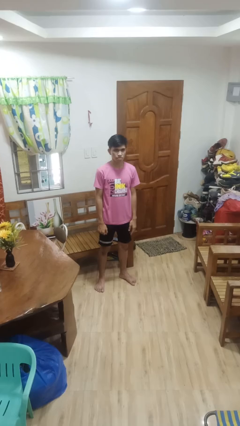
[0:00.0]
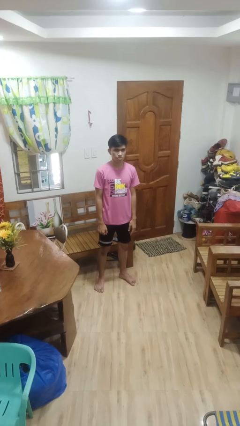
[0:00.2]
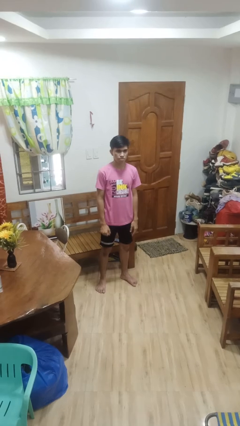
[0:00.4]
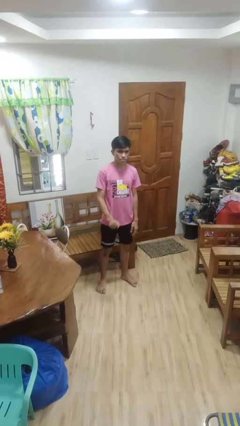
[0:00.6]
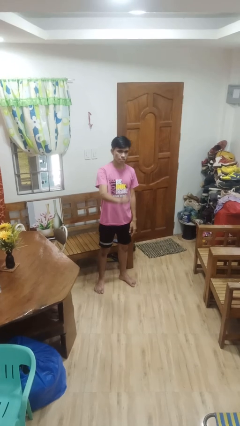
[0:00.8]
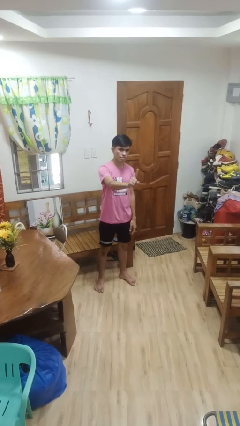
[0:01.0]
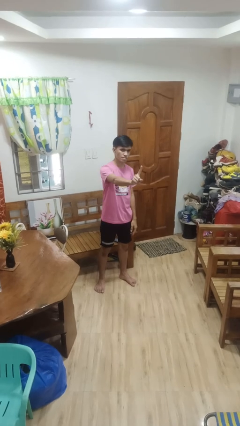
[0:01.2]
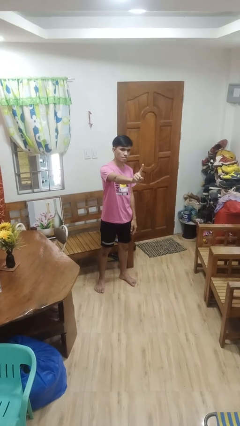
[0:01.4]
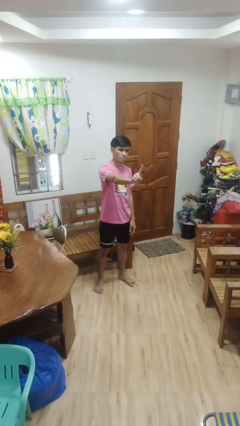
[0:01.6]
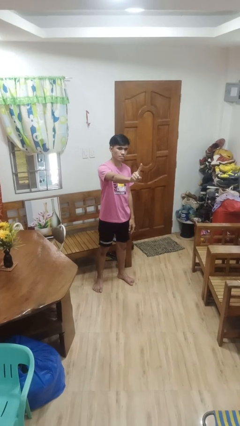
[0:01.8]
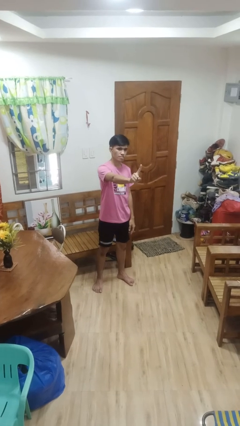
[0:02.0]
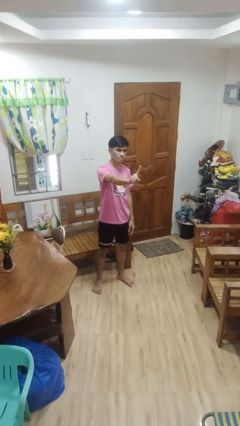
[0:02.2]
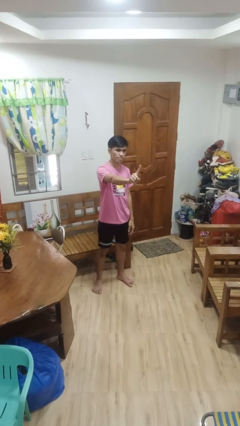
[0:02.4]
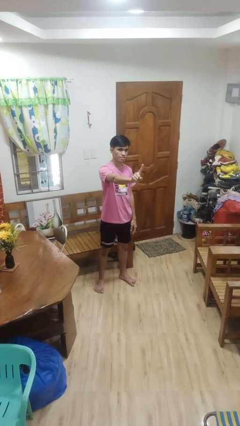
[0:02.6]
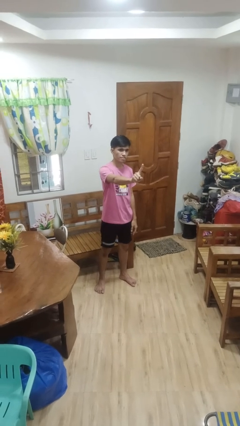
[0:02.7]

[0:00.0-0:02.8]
person gestures number one

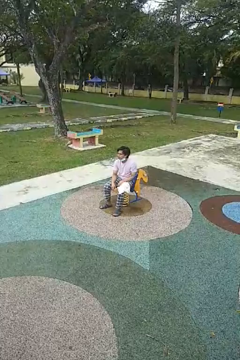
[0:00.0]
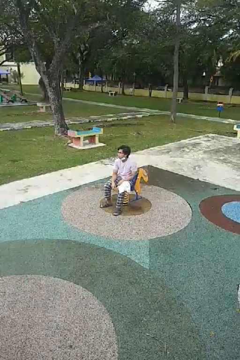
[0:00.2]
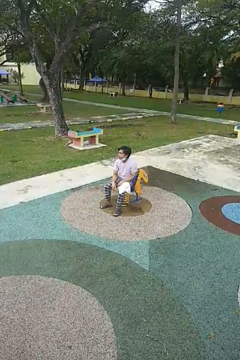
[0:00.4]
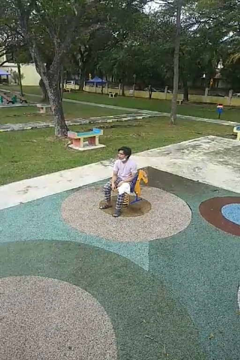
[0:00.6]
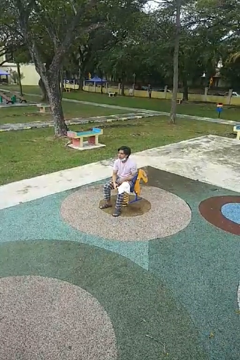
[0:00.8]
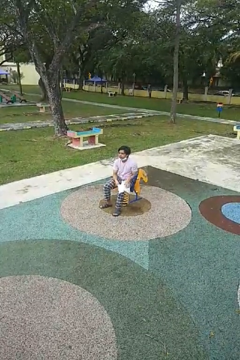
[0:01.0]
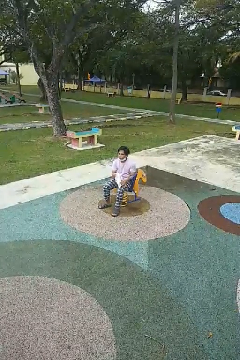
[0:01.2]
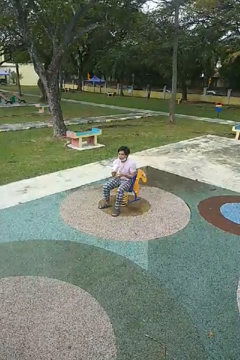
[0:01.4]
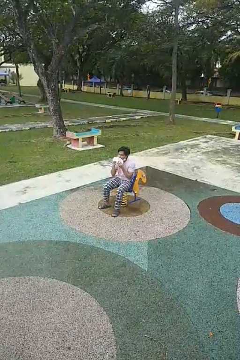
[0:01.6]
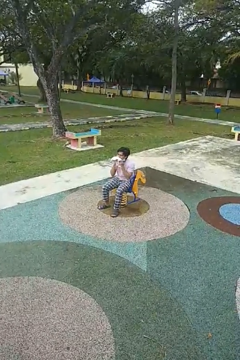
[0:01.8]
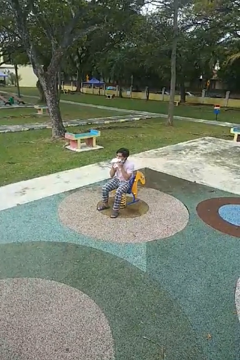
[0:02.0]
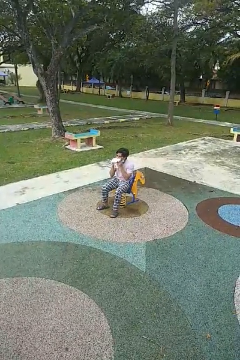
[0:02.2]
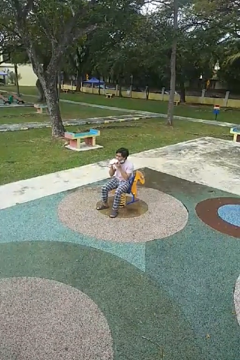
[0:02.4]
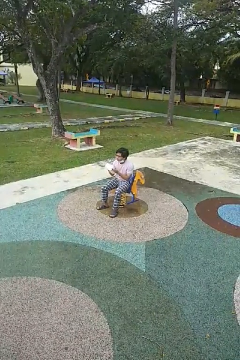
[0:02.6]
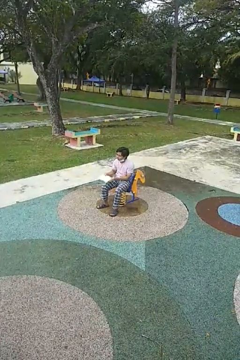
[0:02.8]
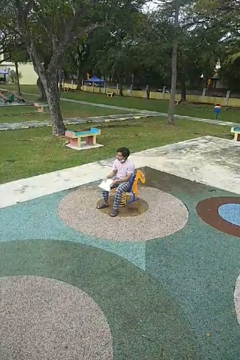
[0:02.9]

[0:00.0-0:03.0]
person wipes mouth with napkin

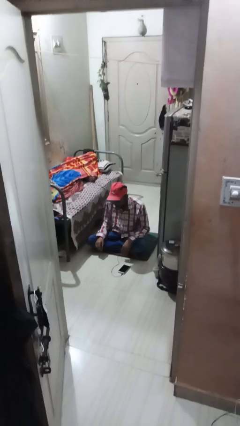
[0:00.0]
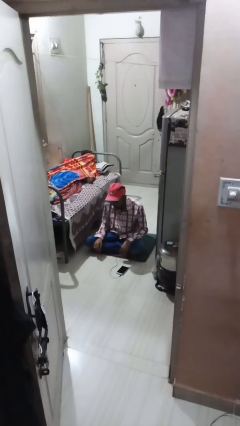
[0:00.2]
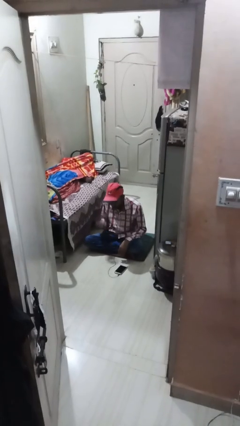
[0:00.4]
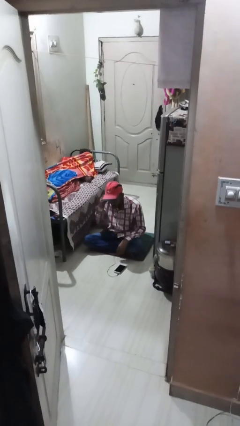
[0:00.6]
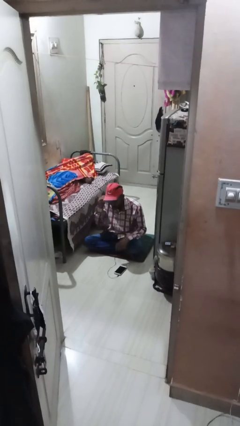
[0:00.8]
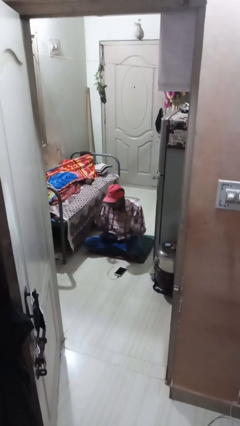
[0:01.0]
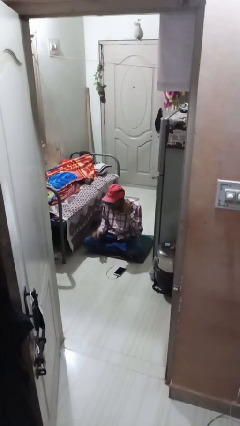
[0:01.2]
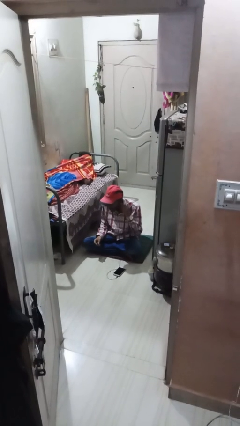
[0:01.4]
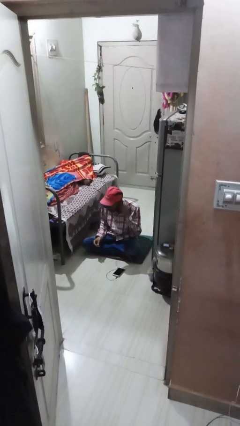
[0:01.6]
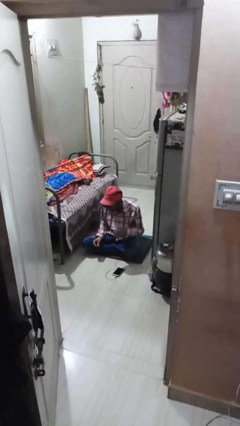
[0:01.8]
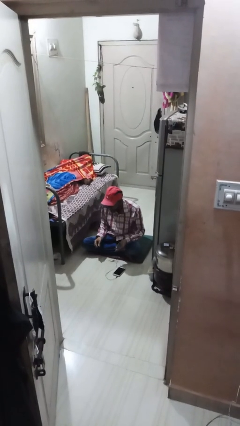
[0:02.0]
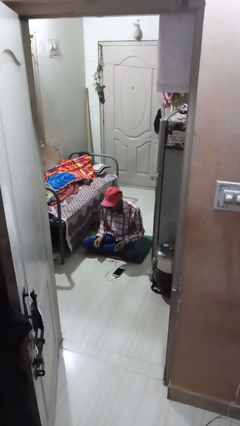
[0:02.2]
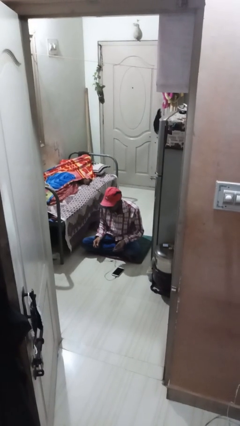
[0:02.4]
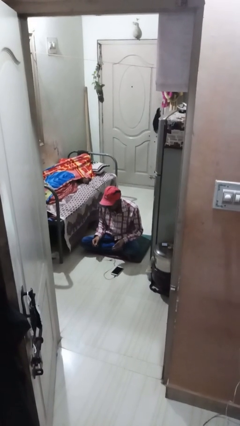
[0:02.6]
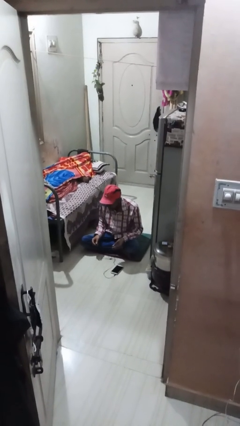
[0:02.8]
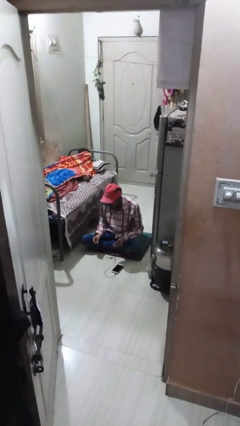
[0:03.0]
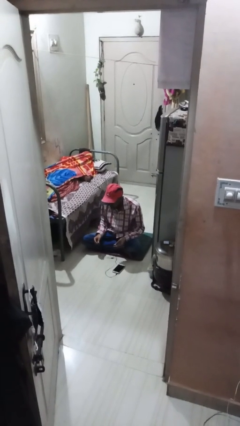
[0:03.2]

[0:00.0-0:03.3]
person takes off headphones

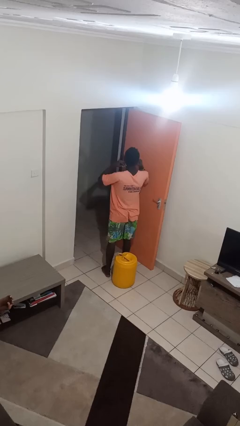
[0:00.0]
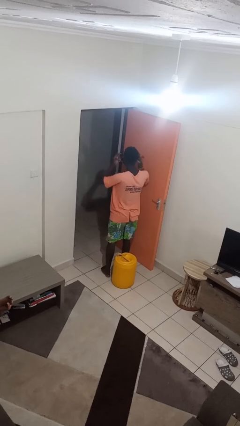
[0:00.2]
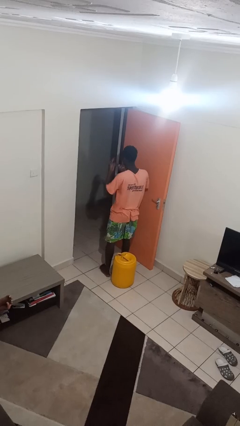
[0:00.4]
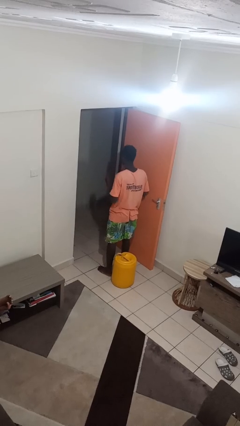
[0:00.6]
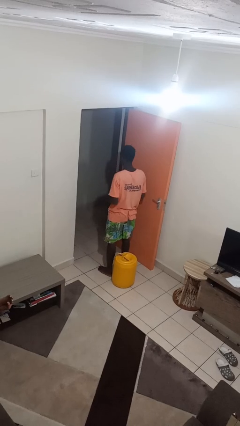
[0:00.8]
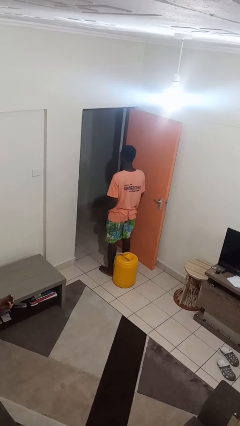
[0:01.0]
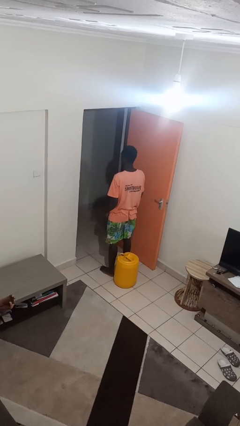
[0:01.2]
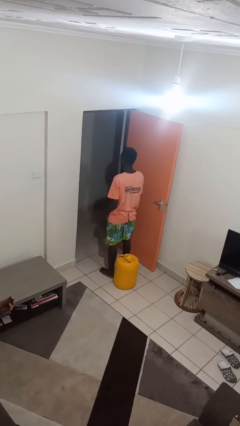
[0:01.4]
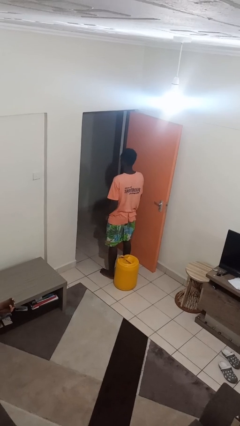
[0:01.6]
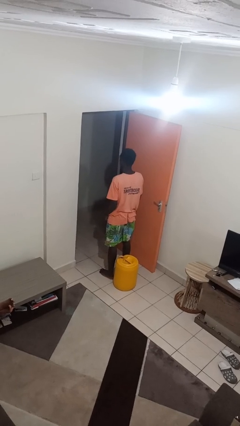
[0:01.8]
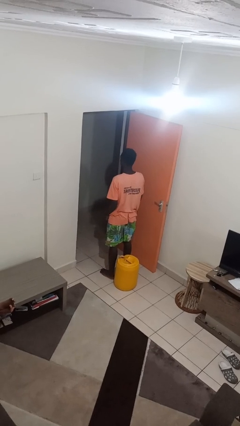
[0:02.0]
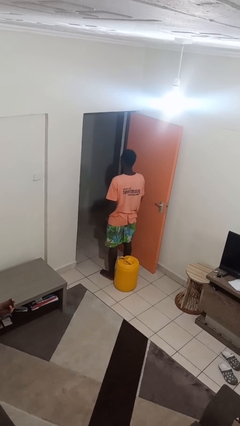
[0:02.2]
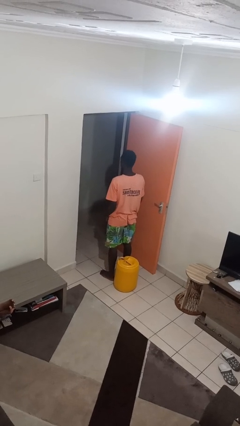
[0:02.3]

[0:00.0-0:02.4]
person takes off facemask

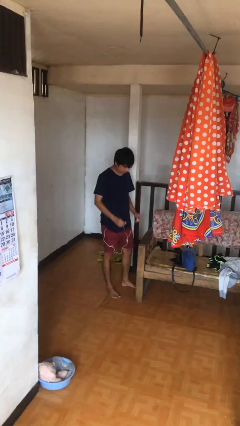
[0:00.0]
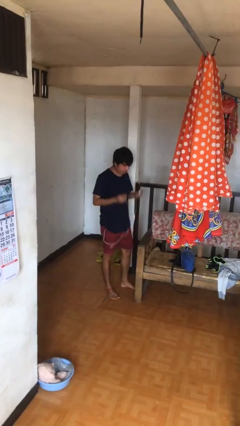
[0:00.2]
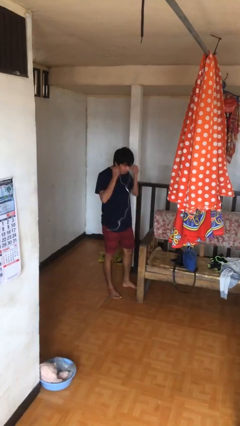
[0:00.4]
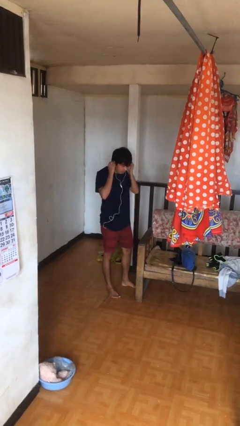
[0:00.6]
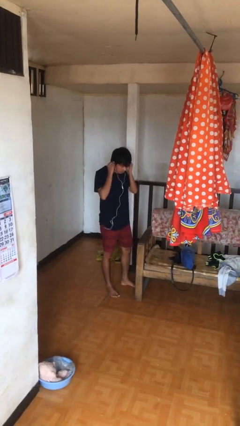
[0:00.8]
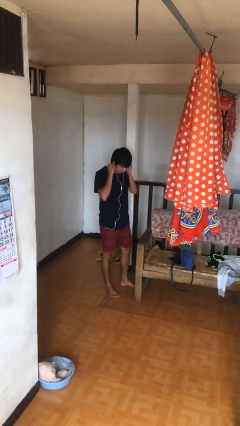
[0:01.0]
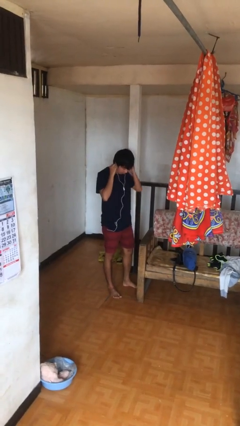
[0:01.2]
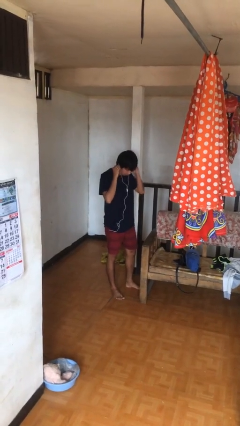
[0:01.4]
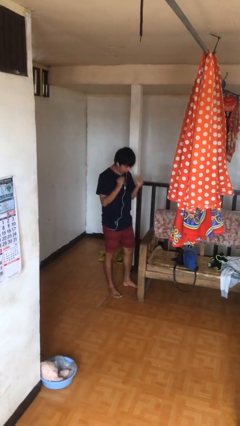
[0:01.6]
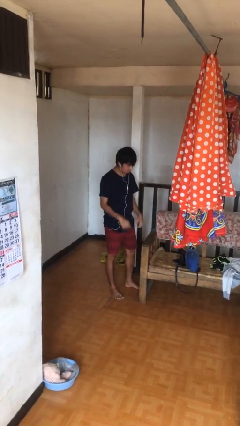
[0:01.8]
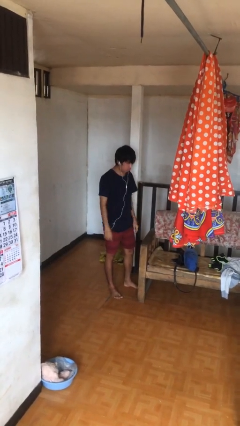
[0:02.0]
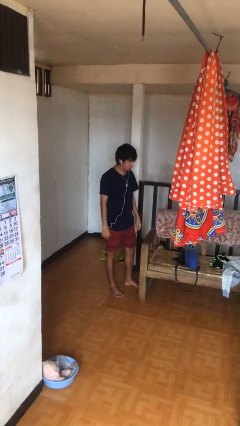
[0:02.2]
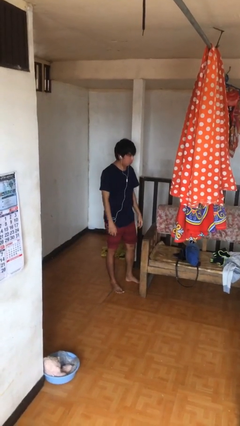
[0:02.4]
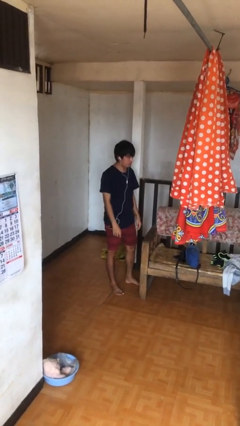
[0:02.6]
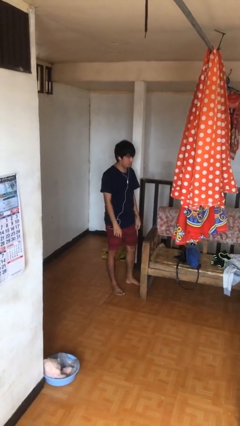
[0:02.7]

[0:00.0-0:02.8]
person puts on headphones

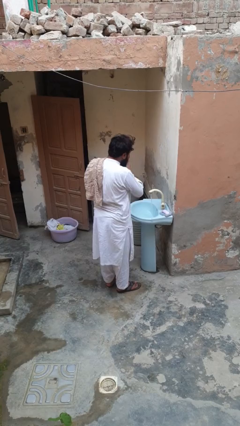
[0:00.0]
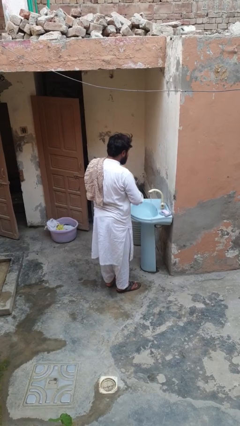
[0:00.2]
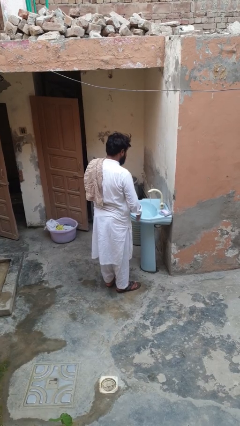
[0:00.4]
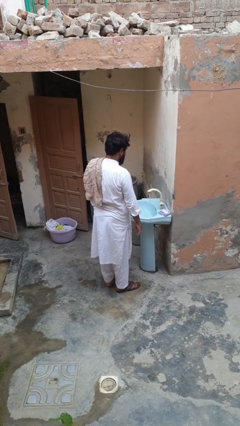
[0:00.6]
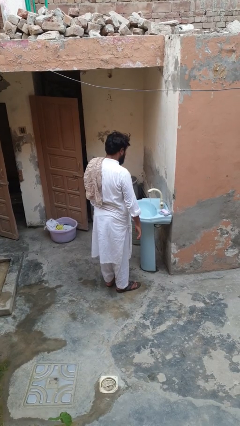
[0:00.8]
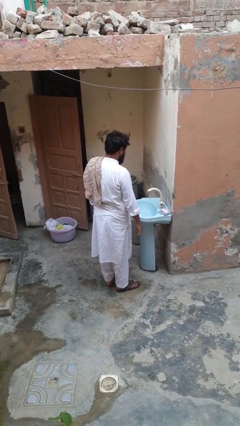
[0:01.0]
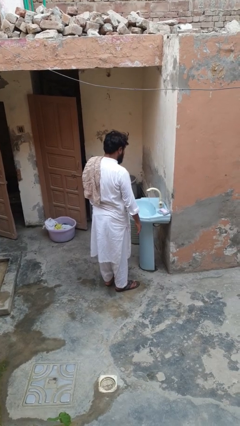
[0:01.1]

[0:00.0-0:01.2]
person dries face with towel

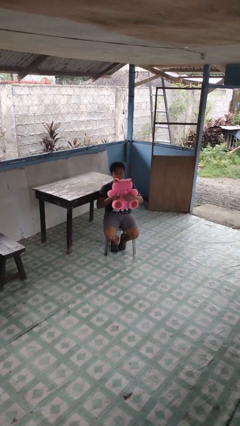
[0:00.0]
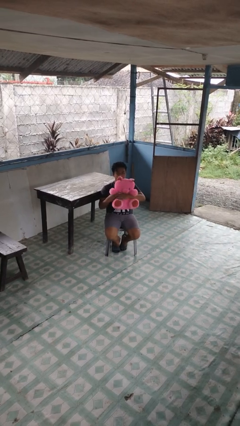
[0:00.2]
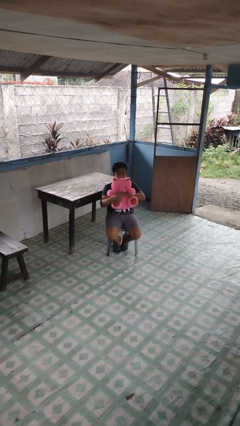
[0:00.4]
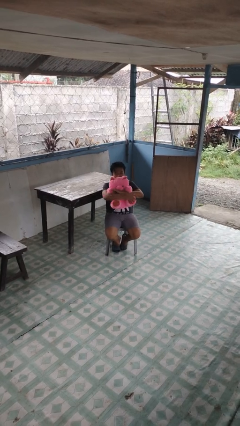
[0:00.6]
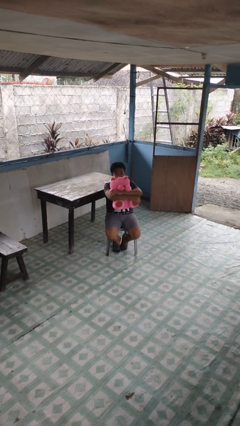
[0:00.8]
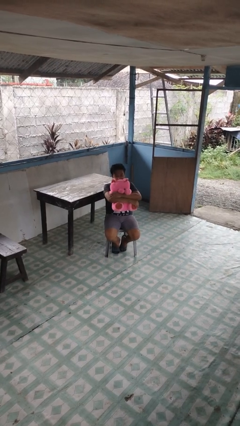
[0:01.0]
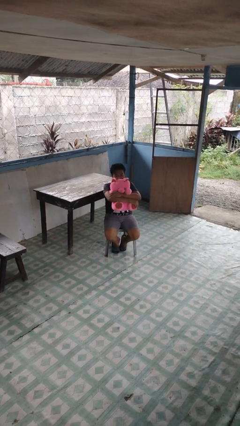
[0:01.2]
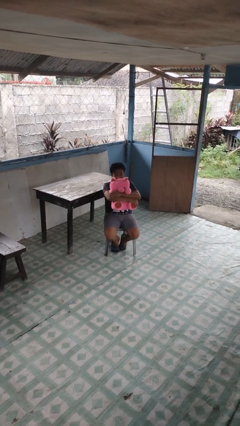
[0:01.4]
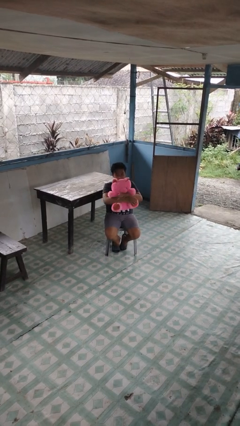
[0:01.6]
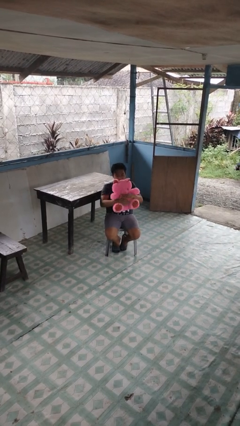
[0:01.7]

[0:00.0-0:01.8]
person hugs stuffed animal
